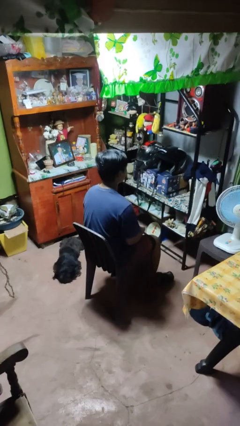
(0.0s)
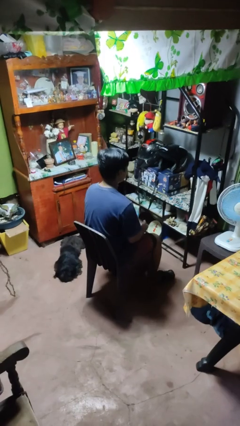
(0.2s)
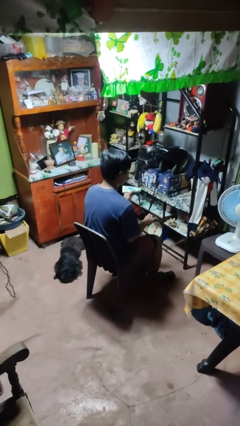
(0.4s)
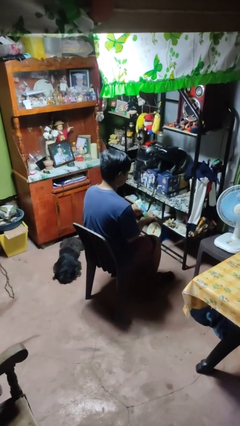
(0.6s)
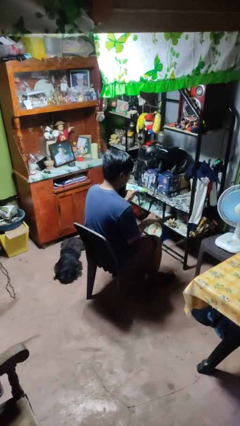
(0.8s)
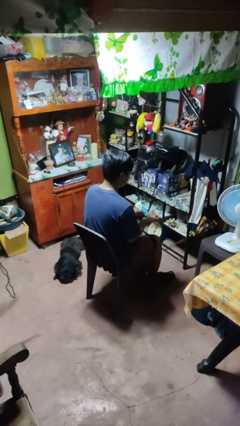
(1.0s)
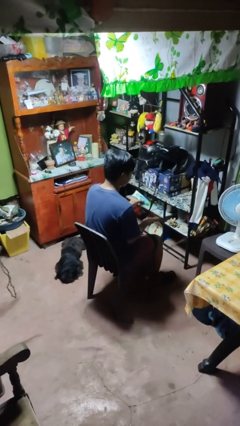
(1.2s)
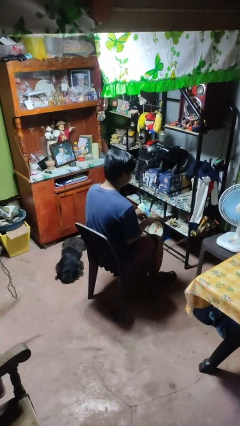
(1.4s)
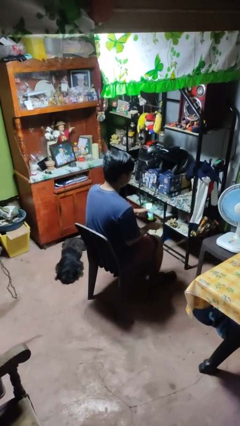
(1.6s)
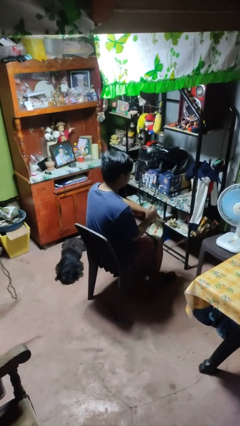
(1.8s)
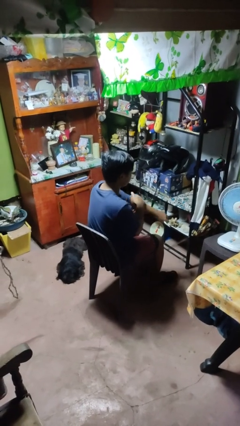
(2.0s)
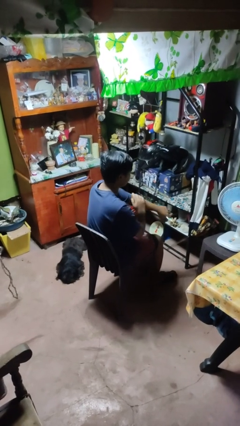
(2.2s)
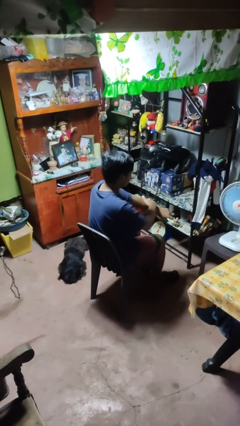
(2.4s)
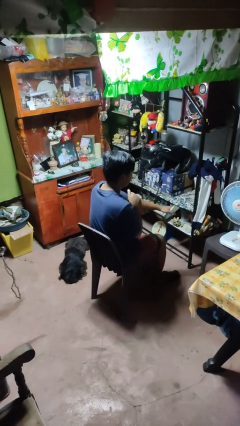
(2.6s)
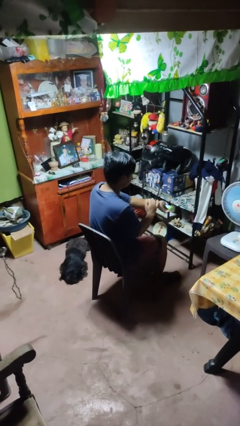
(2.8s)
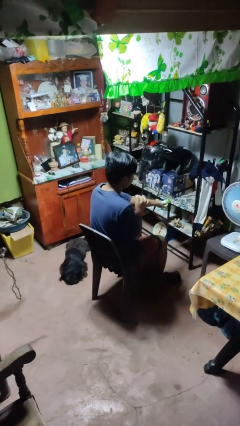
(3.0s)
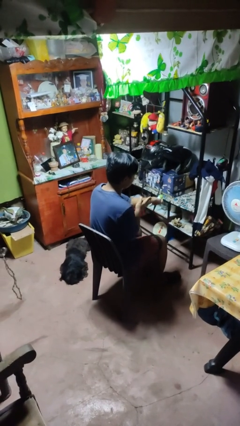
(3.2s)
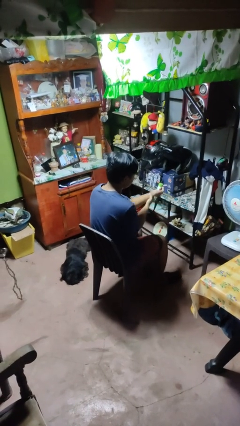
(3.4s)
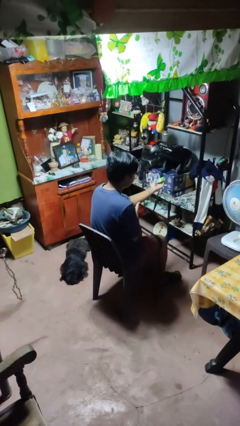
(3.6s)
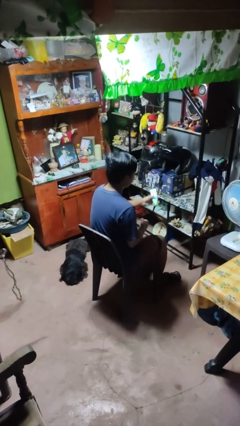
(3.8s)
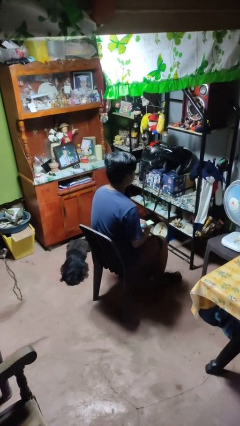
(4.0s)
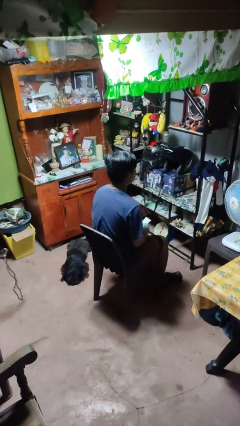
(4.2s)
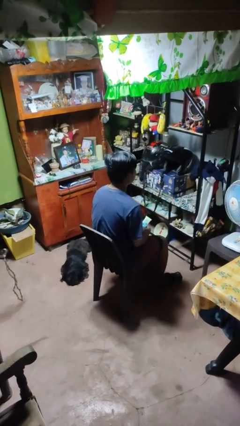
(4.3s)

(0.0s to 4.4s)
person applies sunscreen

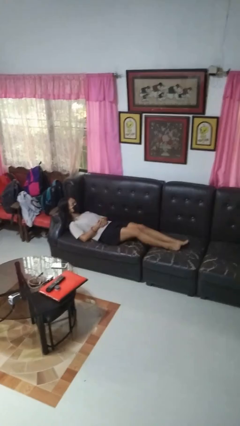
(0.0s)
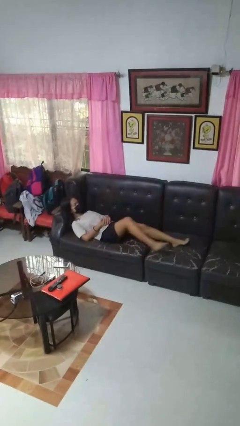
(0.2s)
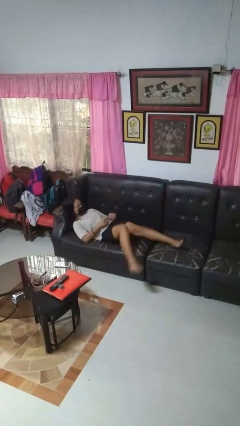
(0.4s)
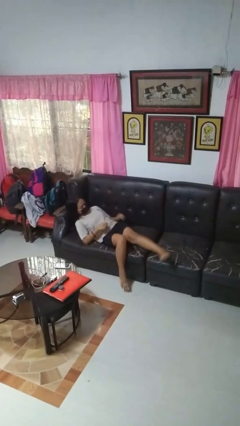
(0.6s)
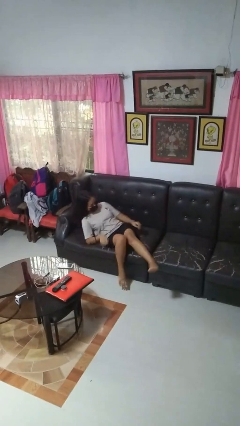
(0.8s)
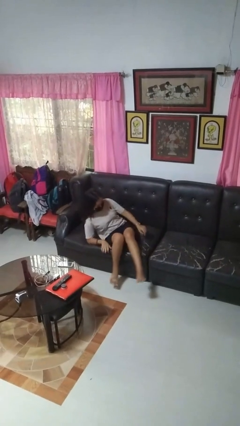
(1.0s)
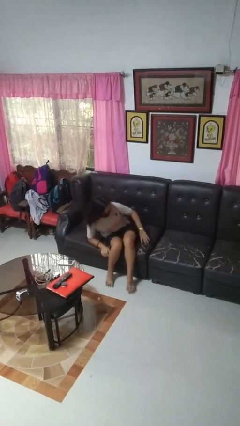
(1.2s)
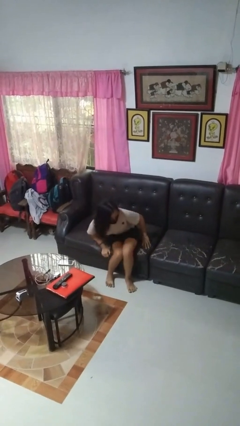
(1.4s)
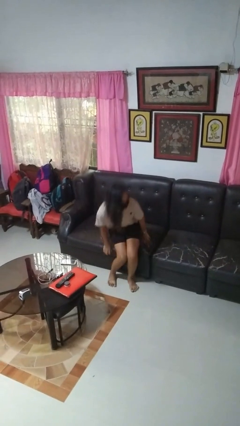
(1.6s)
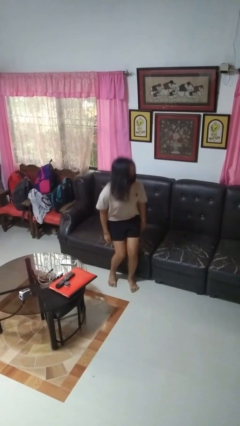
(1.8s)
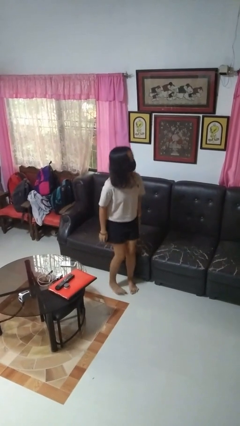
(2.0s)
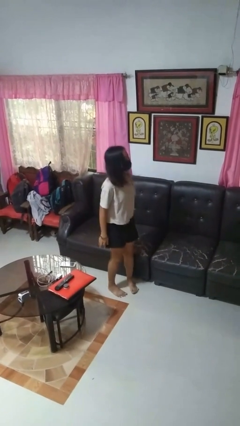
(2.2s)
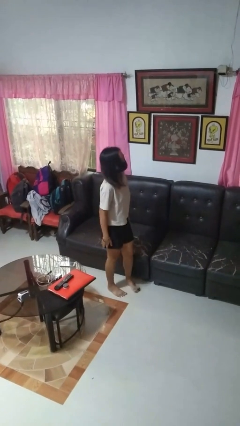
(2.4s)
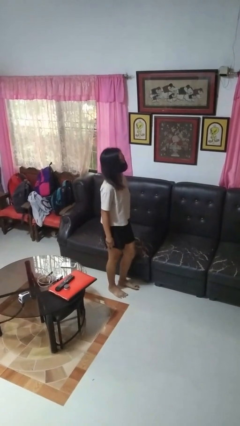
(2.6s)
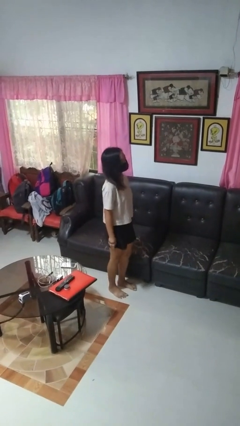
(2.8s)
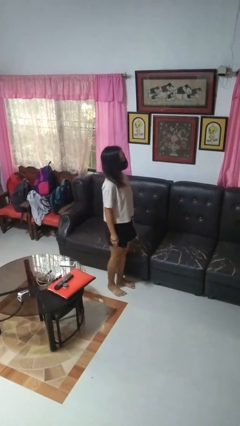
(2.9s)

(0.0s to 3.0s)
person stands up

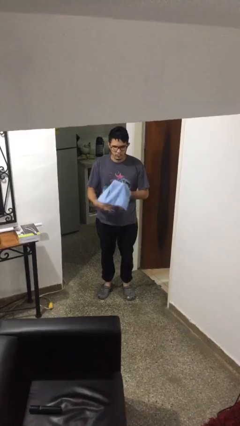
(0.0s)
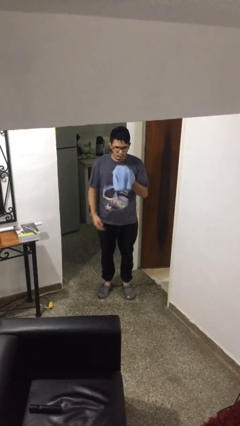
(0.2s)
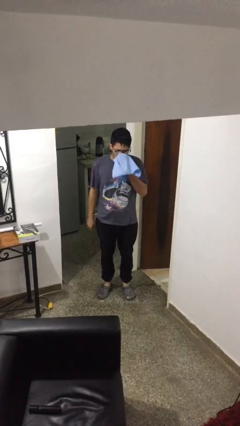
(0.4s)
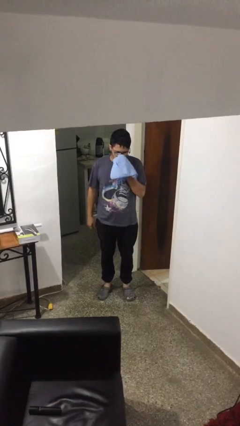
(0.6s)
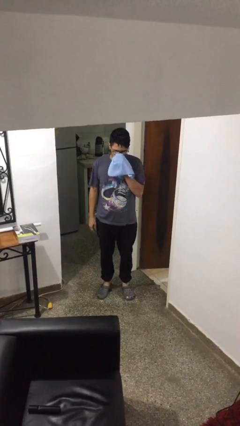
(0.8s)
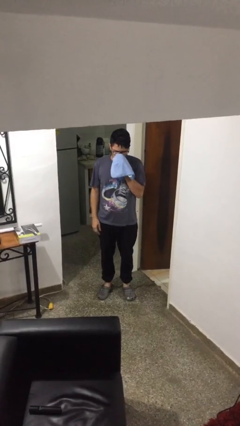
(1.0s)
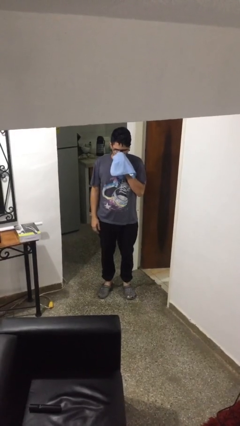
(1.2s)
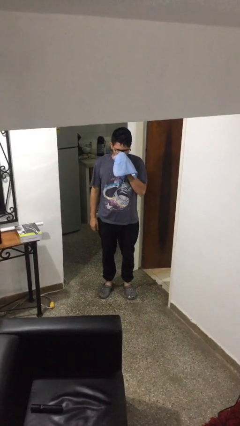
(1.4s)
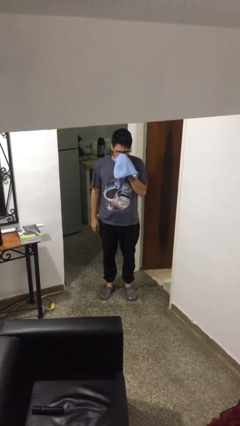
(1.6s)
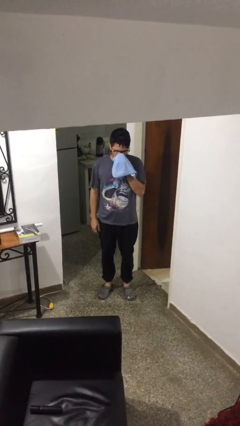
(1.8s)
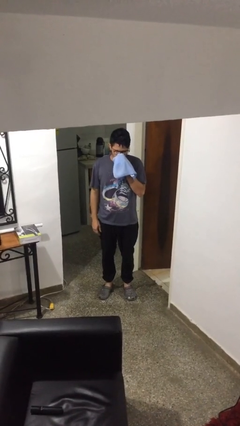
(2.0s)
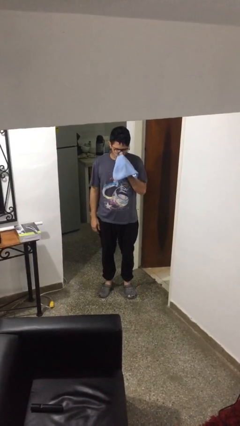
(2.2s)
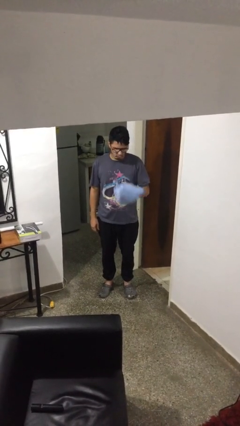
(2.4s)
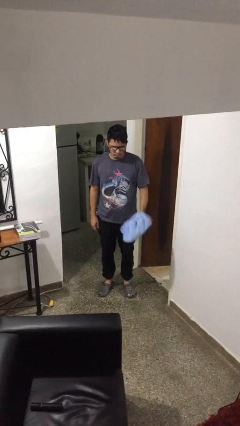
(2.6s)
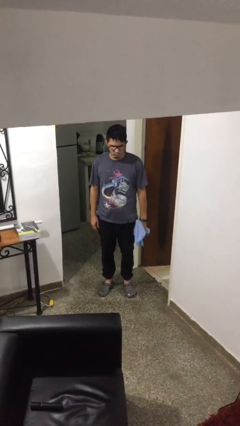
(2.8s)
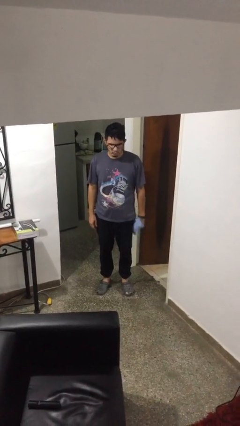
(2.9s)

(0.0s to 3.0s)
person blows nose

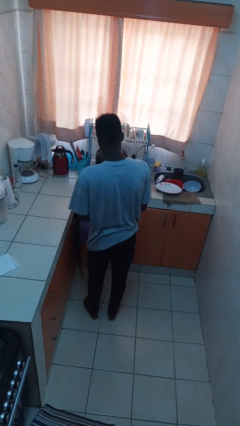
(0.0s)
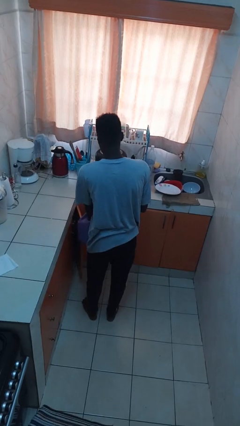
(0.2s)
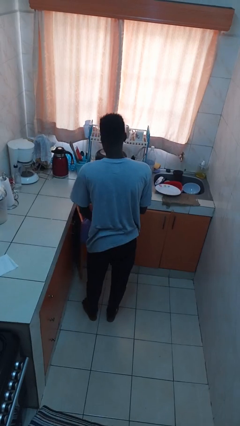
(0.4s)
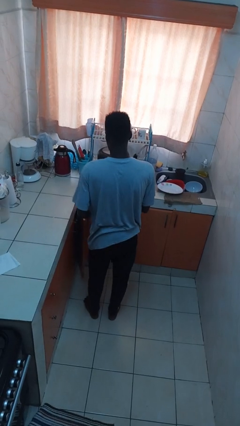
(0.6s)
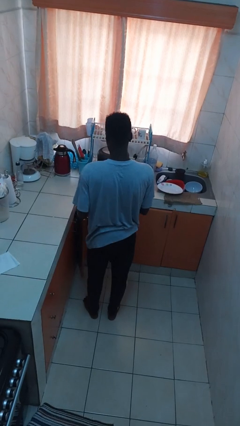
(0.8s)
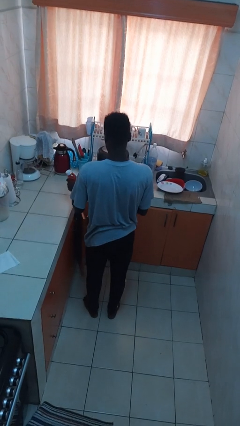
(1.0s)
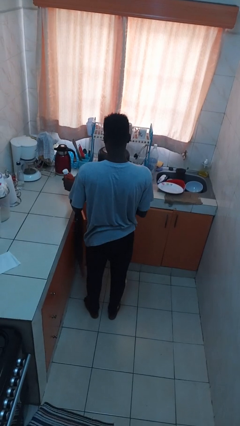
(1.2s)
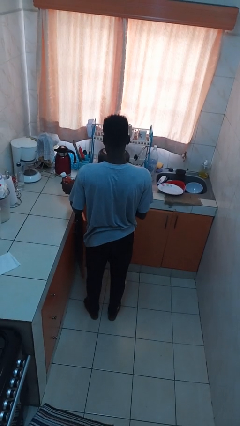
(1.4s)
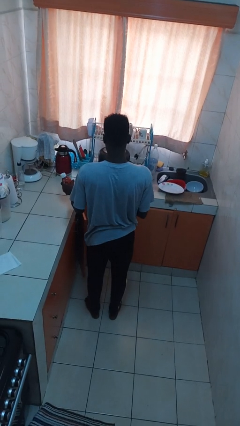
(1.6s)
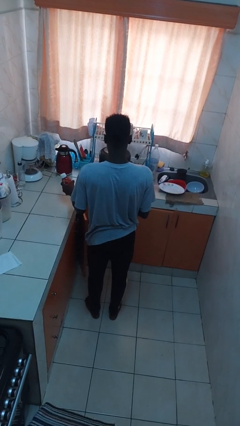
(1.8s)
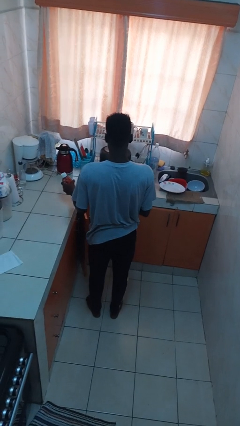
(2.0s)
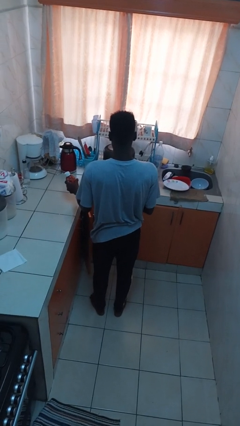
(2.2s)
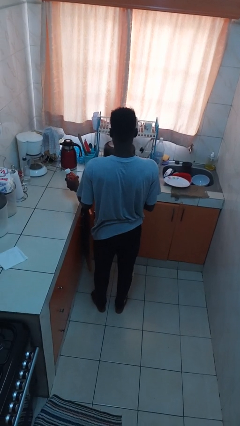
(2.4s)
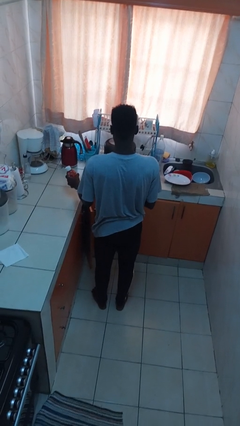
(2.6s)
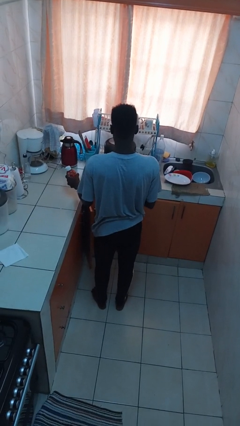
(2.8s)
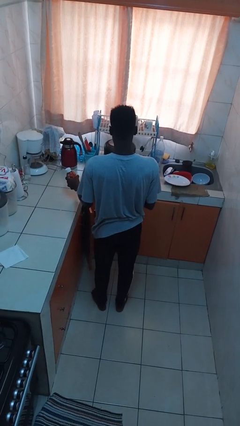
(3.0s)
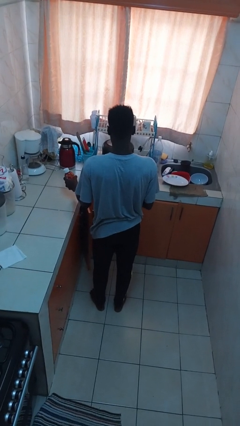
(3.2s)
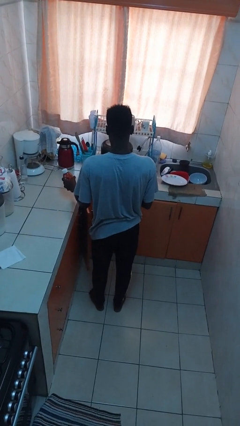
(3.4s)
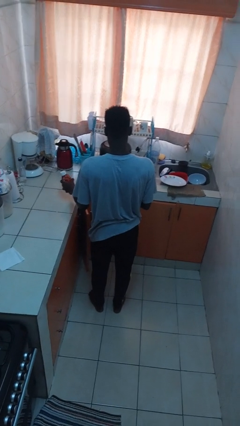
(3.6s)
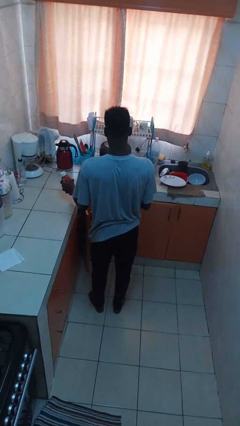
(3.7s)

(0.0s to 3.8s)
person takes object from bag

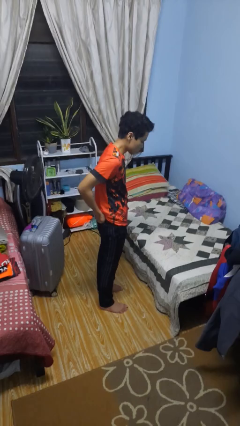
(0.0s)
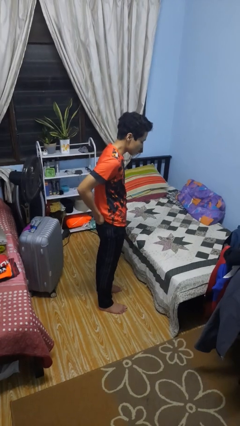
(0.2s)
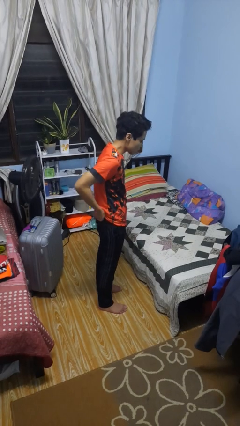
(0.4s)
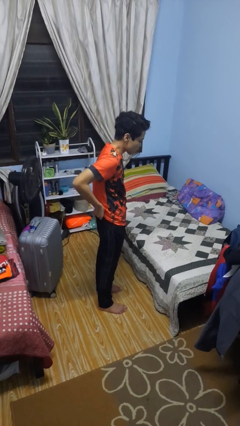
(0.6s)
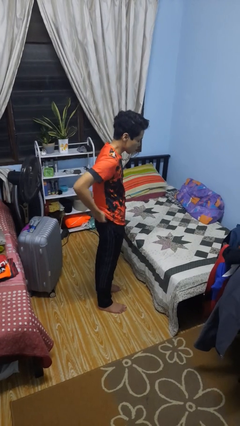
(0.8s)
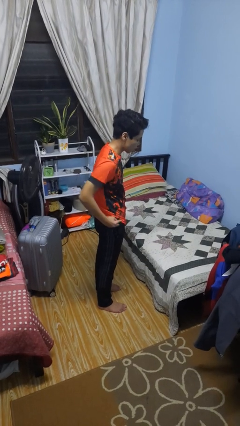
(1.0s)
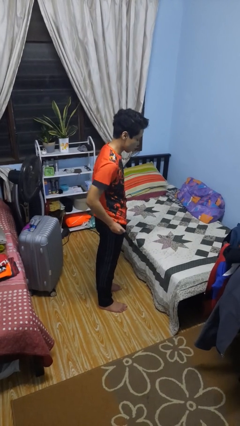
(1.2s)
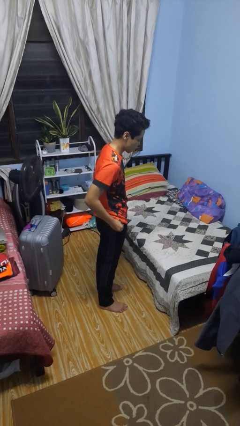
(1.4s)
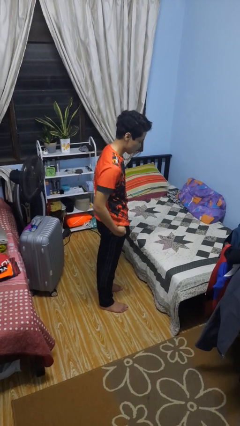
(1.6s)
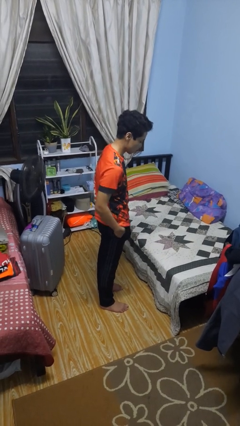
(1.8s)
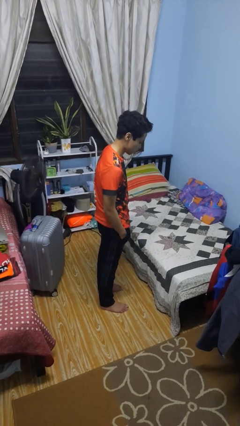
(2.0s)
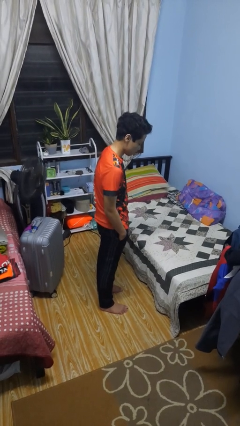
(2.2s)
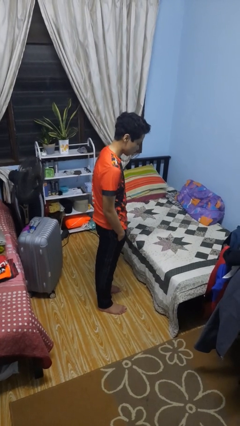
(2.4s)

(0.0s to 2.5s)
person puts hands in back pockets

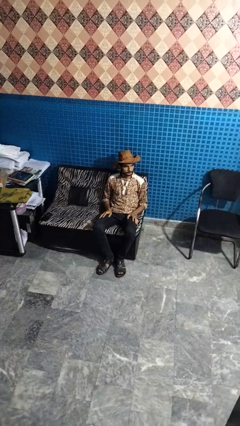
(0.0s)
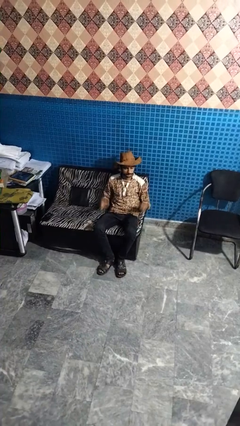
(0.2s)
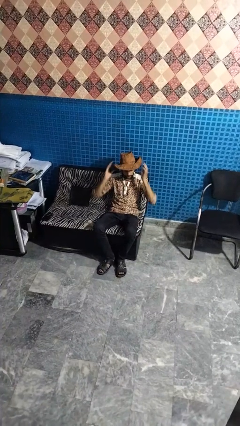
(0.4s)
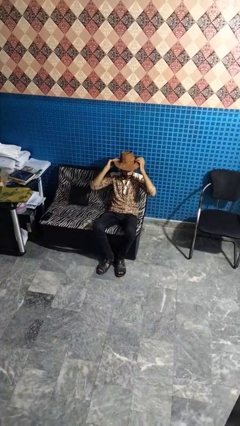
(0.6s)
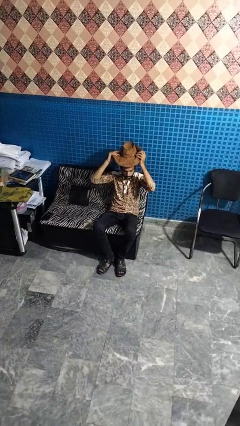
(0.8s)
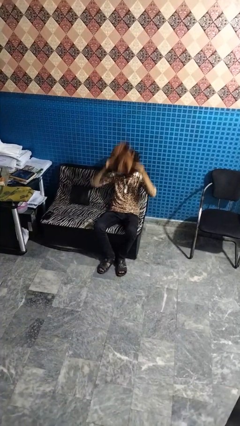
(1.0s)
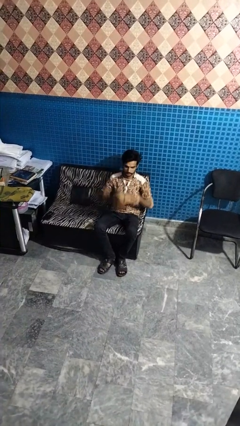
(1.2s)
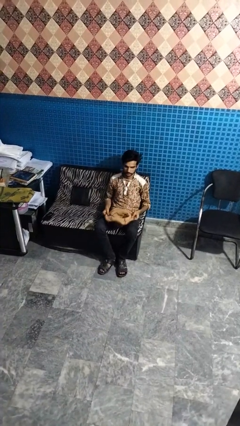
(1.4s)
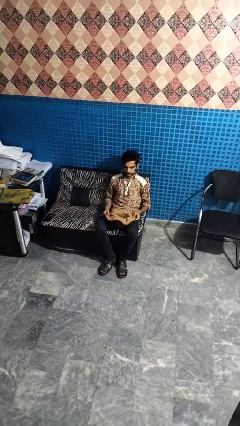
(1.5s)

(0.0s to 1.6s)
person takes off hat
